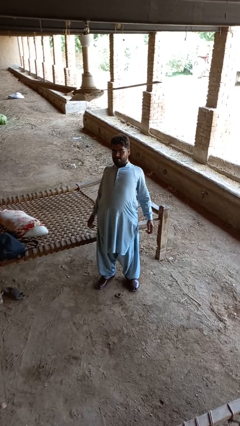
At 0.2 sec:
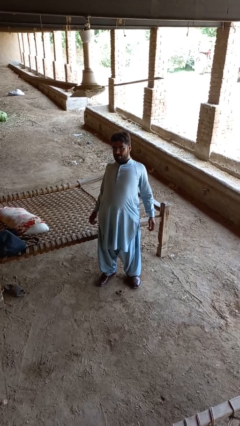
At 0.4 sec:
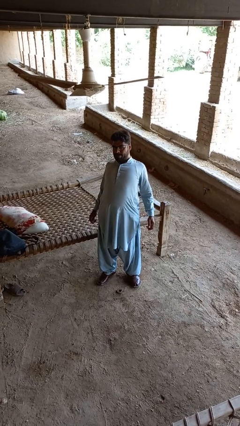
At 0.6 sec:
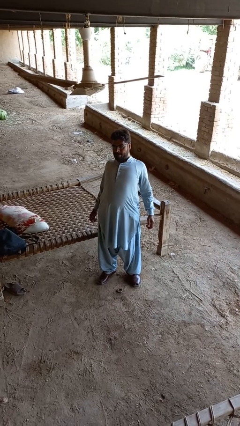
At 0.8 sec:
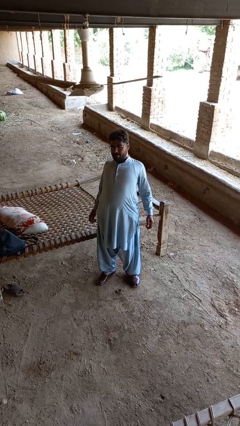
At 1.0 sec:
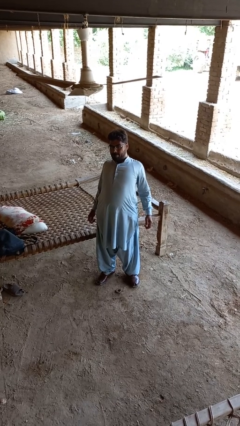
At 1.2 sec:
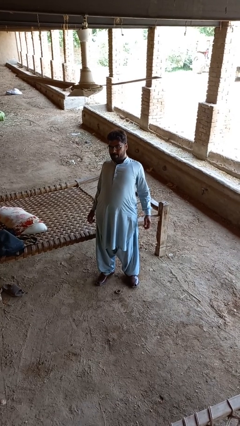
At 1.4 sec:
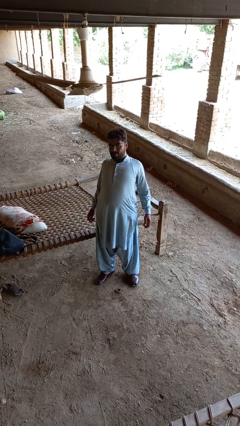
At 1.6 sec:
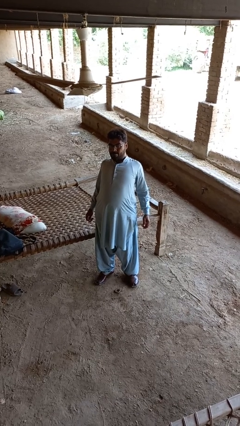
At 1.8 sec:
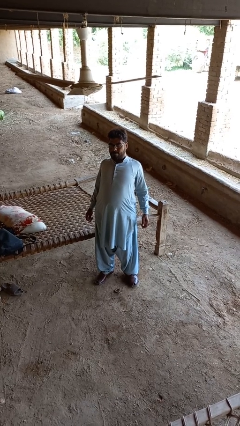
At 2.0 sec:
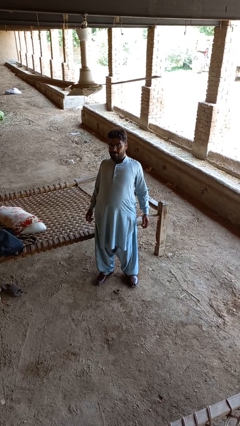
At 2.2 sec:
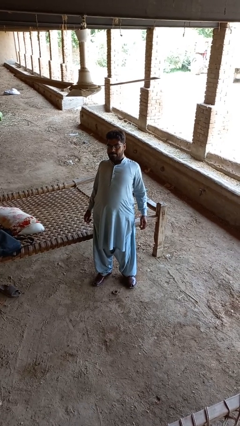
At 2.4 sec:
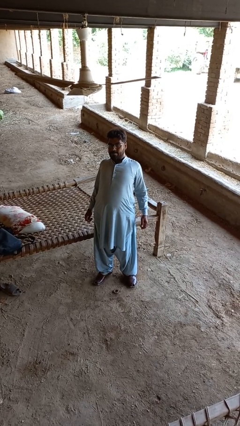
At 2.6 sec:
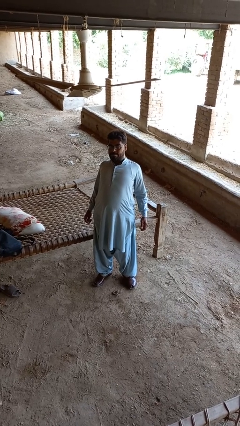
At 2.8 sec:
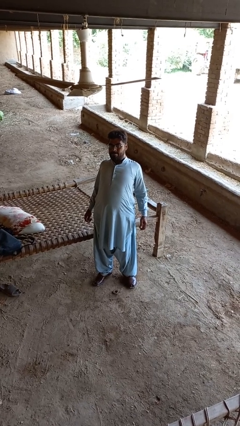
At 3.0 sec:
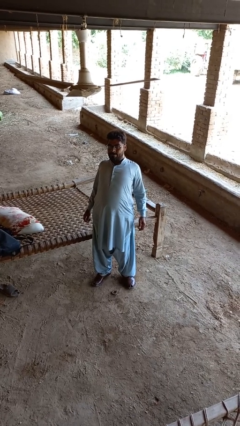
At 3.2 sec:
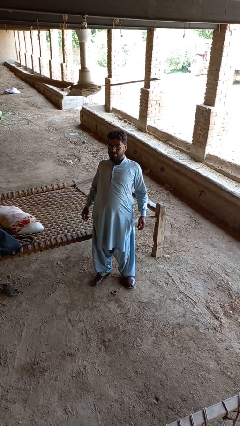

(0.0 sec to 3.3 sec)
person stretches back

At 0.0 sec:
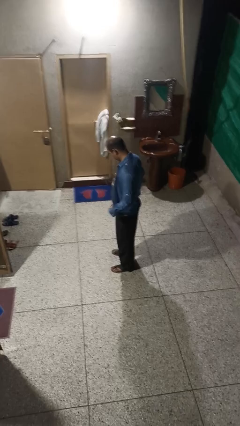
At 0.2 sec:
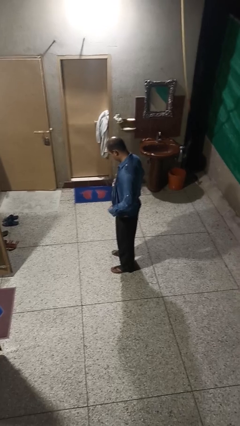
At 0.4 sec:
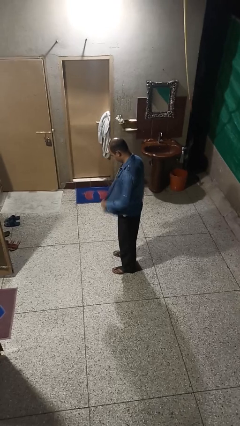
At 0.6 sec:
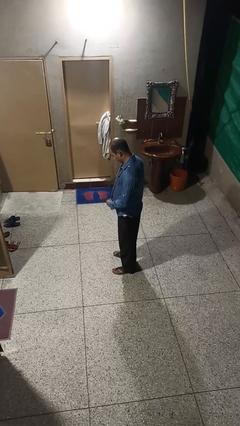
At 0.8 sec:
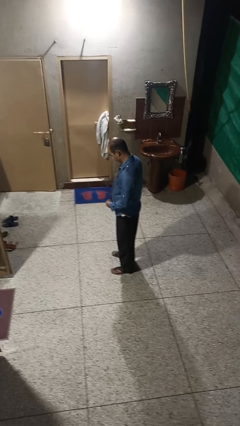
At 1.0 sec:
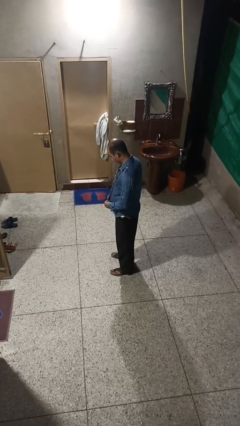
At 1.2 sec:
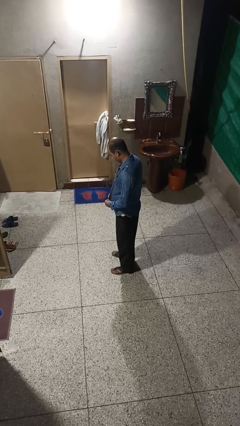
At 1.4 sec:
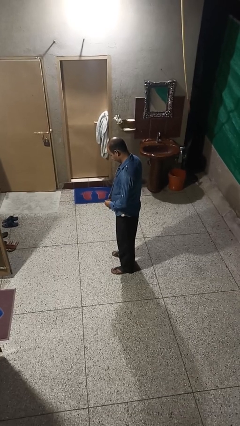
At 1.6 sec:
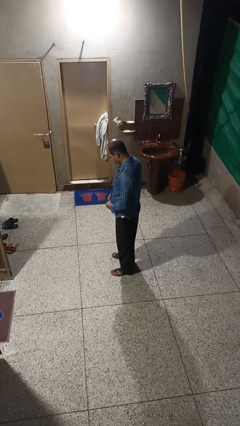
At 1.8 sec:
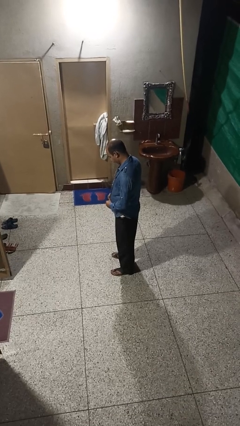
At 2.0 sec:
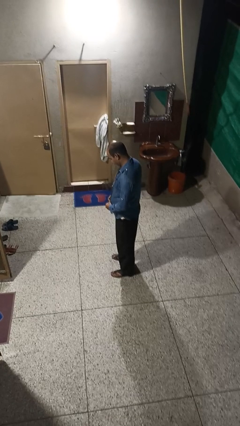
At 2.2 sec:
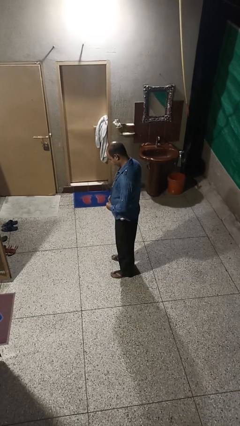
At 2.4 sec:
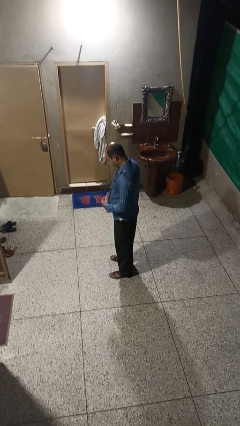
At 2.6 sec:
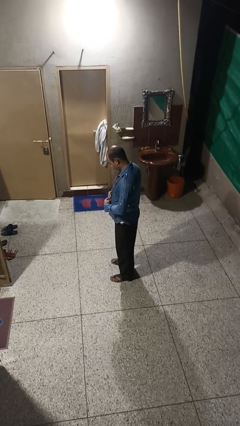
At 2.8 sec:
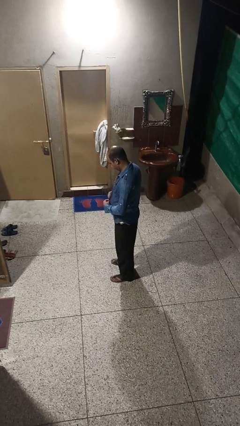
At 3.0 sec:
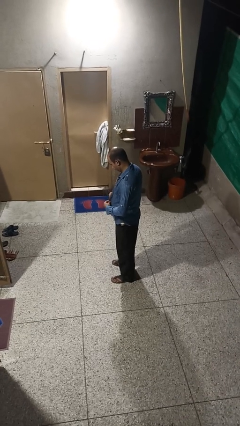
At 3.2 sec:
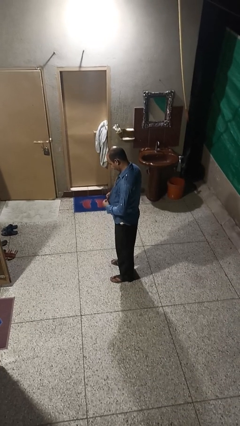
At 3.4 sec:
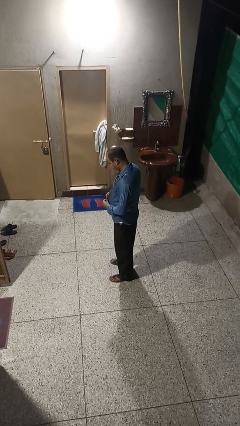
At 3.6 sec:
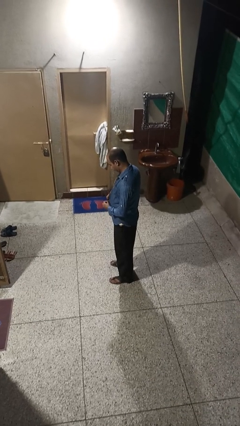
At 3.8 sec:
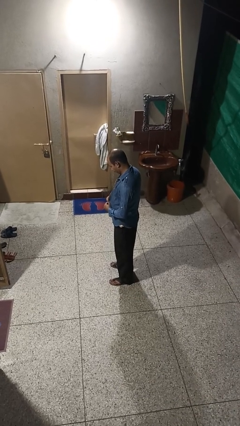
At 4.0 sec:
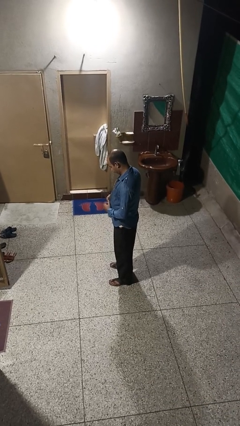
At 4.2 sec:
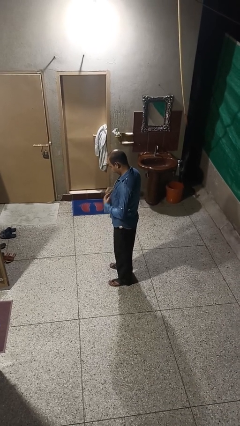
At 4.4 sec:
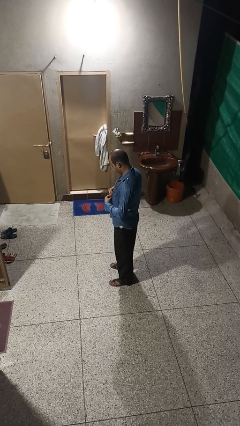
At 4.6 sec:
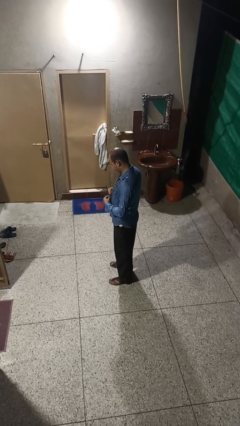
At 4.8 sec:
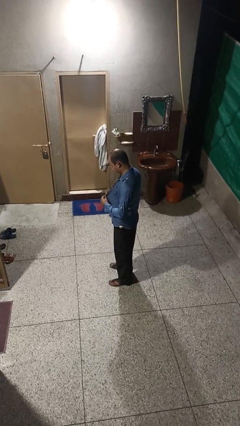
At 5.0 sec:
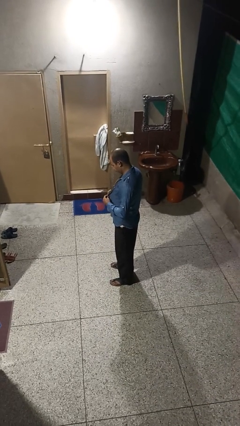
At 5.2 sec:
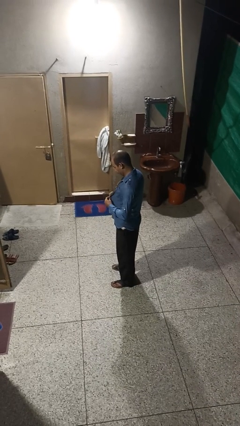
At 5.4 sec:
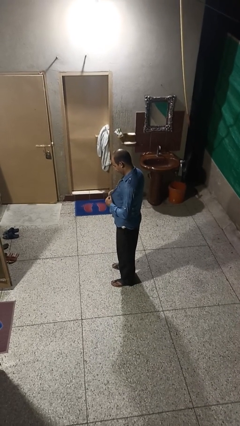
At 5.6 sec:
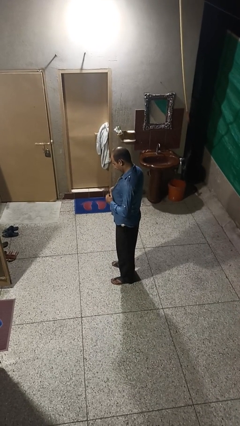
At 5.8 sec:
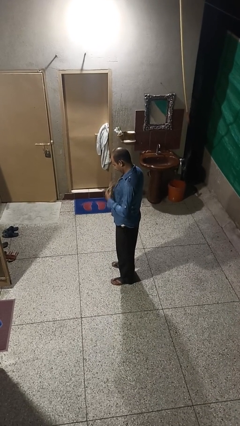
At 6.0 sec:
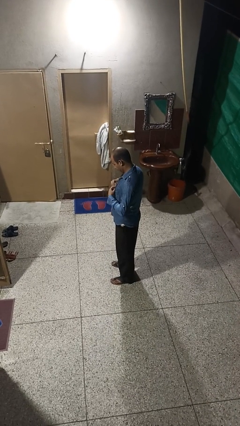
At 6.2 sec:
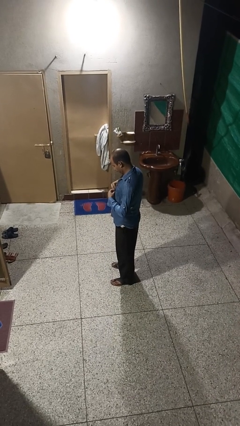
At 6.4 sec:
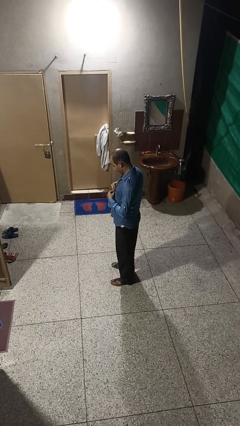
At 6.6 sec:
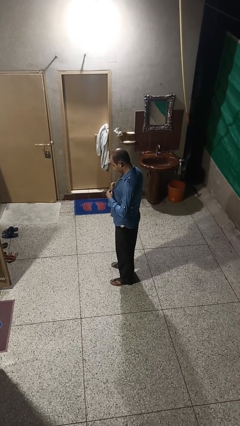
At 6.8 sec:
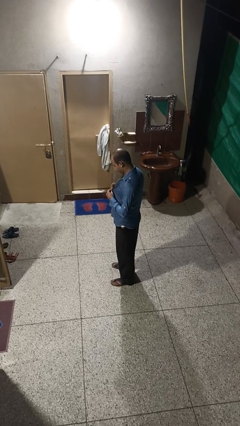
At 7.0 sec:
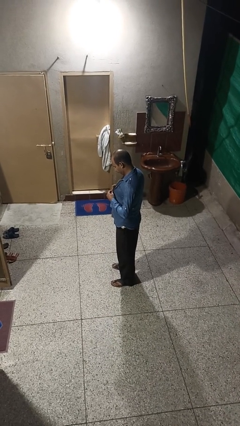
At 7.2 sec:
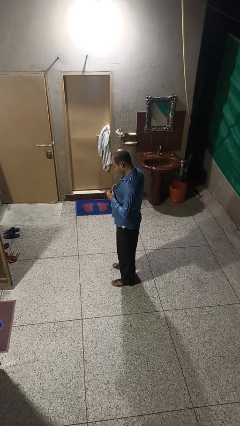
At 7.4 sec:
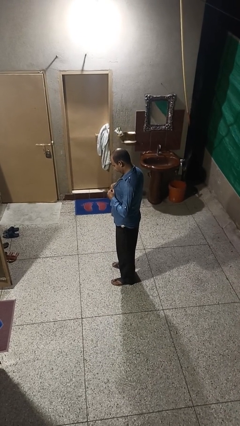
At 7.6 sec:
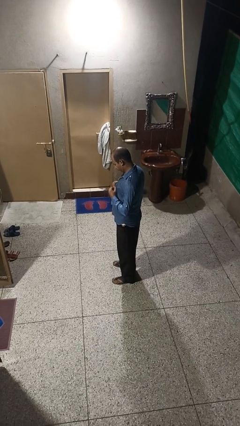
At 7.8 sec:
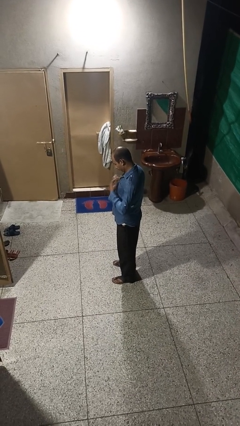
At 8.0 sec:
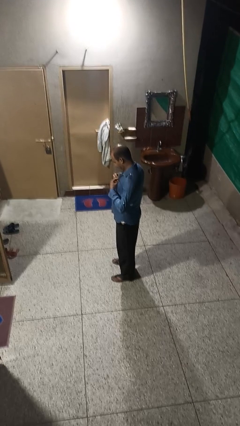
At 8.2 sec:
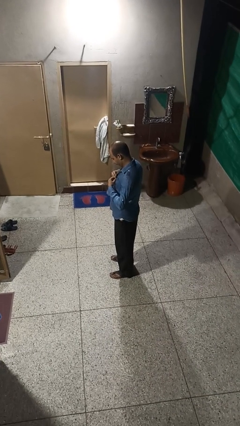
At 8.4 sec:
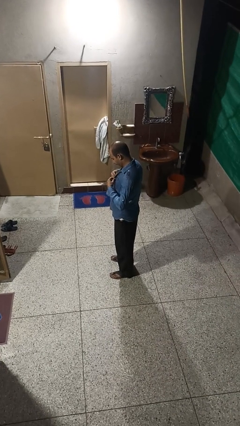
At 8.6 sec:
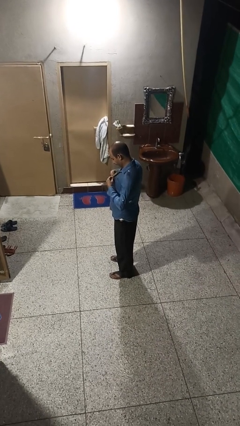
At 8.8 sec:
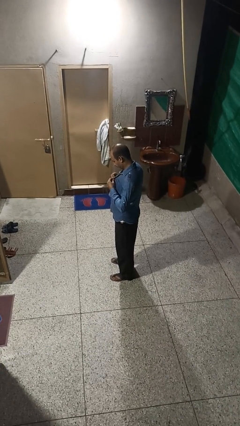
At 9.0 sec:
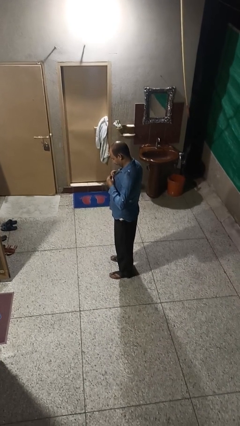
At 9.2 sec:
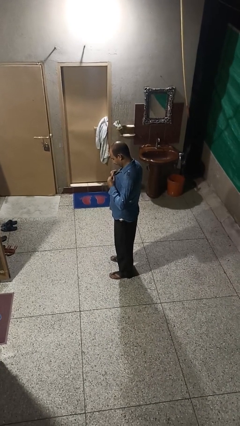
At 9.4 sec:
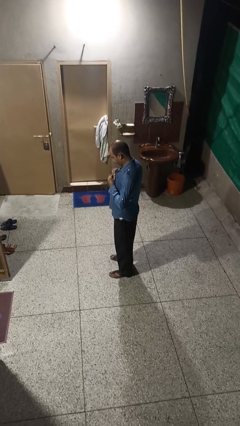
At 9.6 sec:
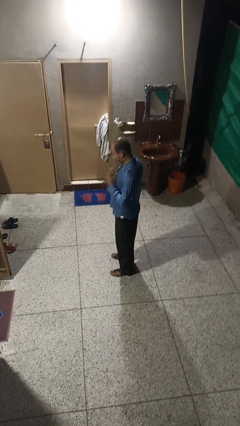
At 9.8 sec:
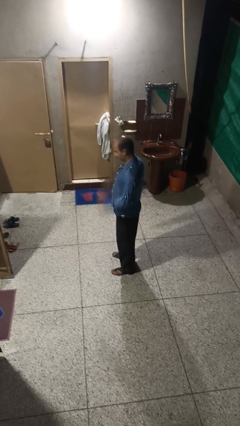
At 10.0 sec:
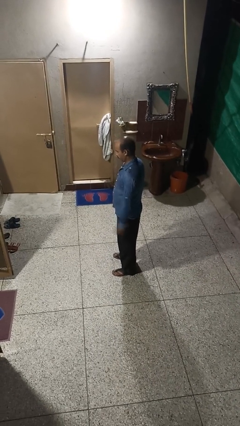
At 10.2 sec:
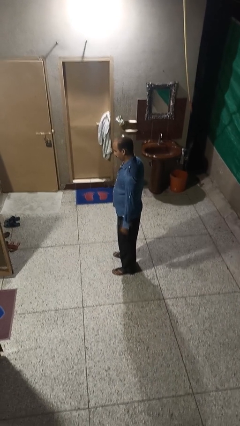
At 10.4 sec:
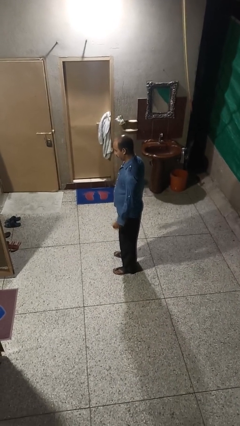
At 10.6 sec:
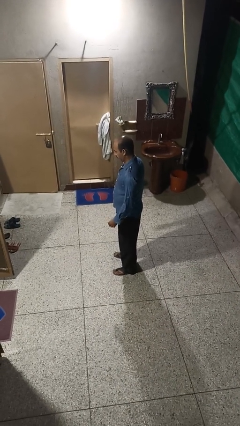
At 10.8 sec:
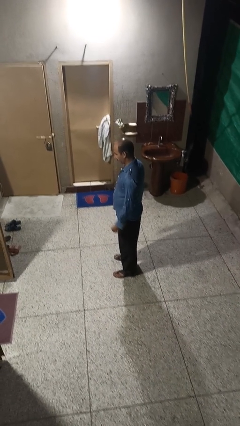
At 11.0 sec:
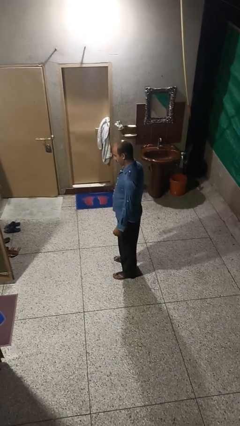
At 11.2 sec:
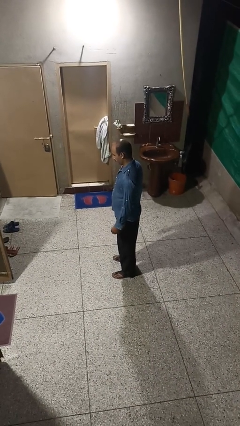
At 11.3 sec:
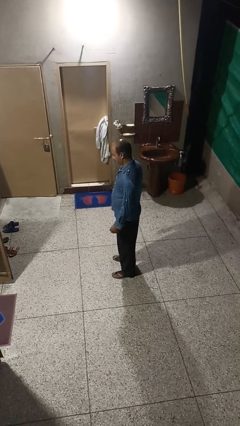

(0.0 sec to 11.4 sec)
person buttons shirt

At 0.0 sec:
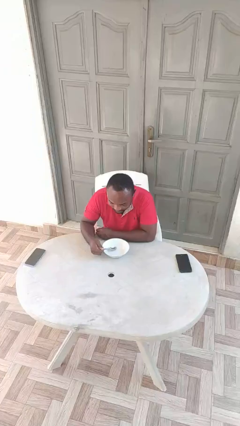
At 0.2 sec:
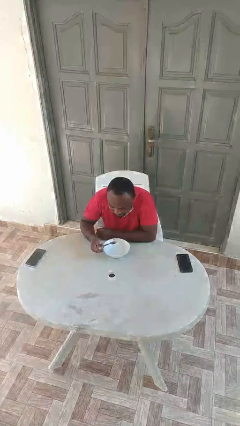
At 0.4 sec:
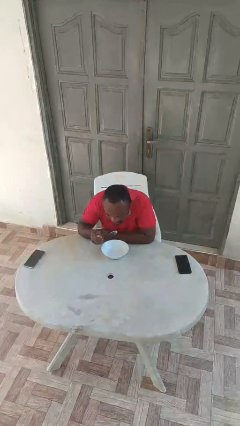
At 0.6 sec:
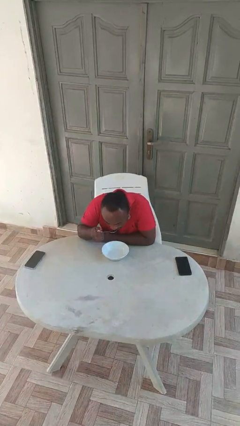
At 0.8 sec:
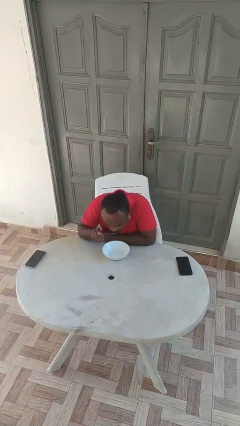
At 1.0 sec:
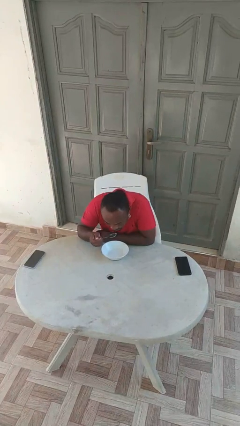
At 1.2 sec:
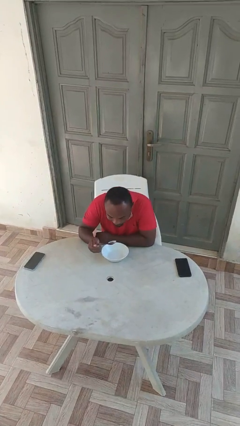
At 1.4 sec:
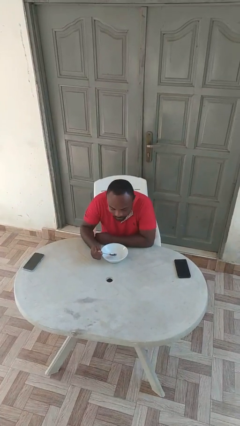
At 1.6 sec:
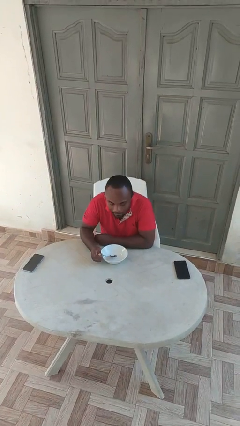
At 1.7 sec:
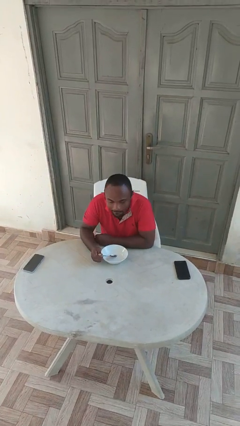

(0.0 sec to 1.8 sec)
person eats with utensil

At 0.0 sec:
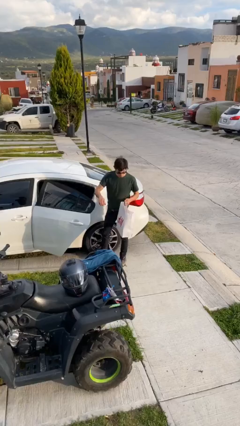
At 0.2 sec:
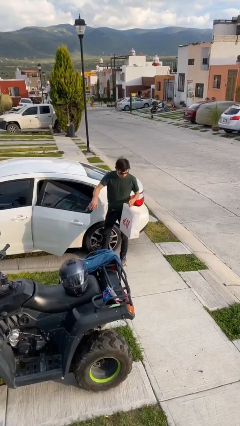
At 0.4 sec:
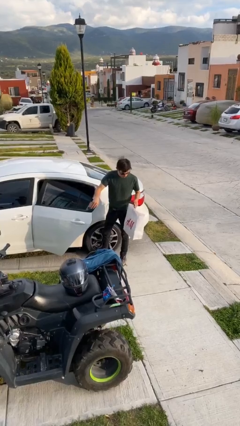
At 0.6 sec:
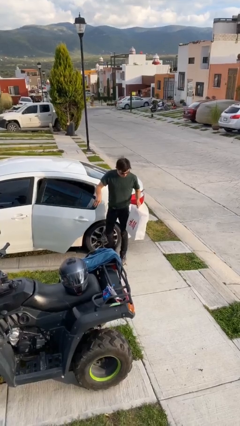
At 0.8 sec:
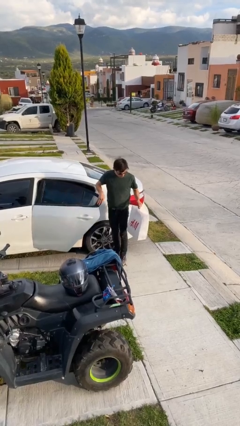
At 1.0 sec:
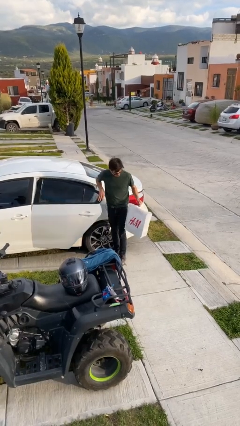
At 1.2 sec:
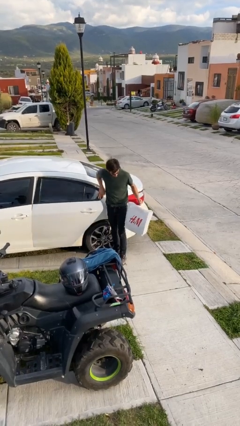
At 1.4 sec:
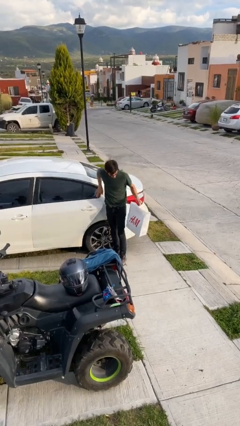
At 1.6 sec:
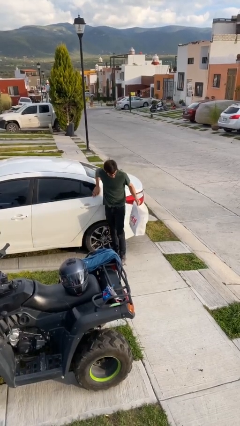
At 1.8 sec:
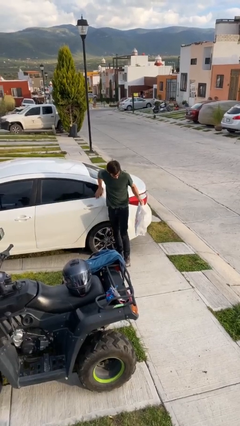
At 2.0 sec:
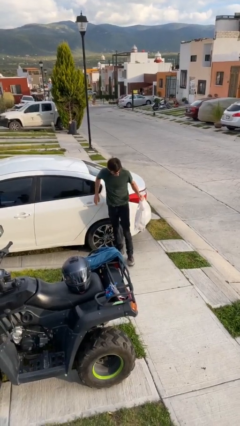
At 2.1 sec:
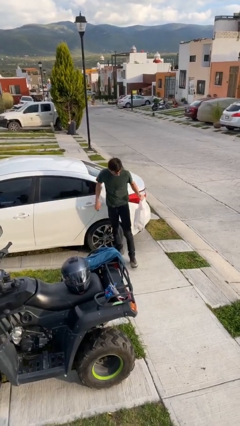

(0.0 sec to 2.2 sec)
person closes car door
